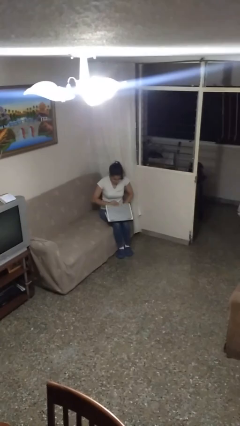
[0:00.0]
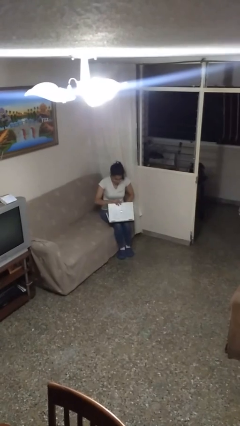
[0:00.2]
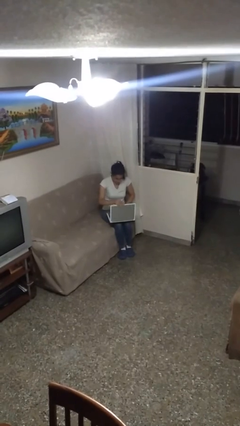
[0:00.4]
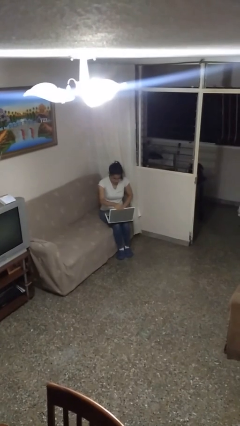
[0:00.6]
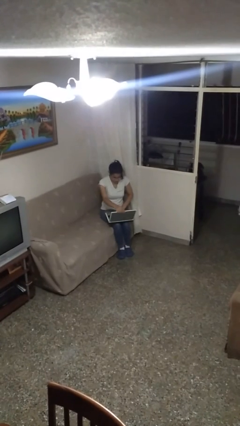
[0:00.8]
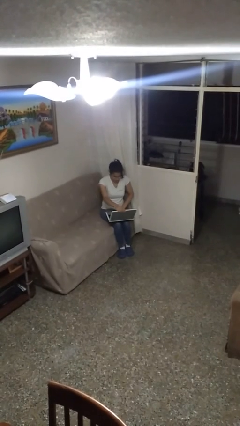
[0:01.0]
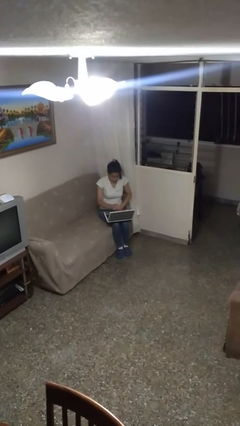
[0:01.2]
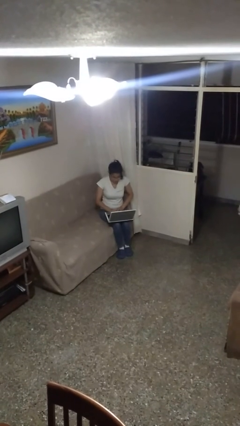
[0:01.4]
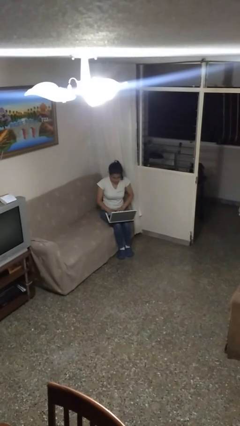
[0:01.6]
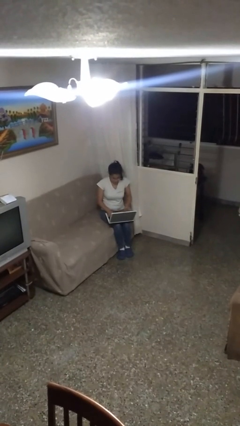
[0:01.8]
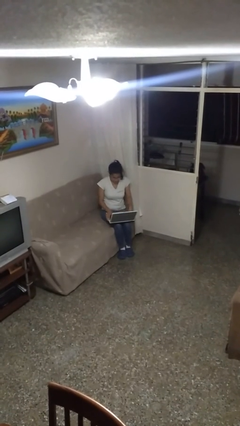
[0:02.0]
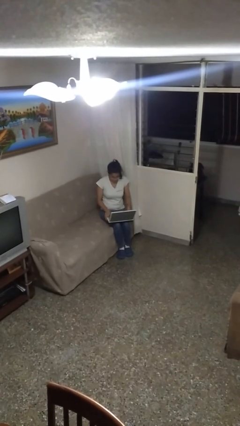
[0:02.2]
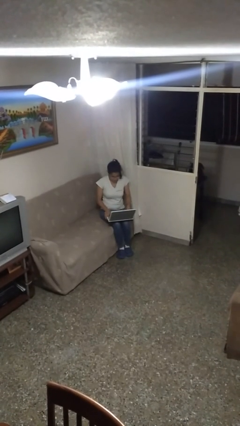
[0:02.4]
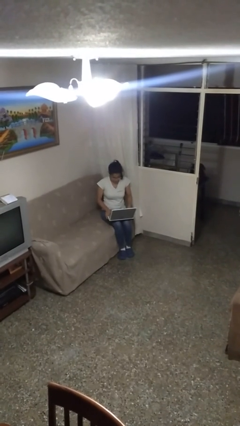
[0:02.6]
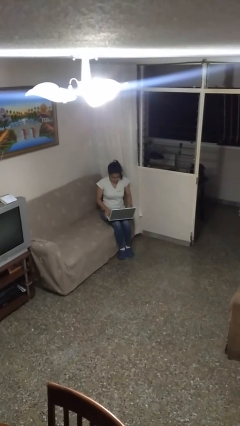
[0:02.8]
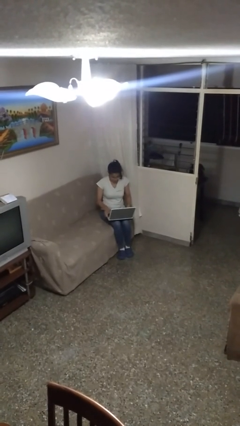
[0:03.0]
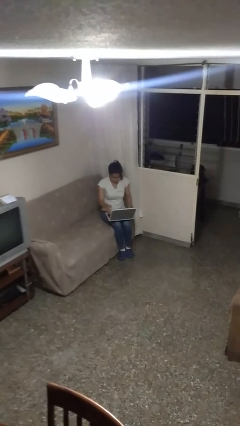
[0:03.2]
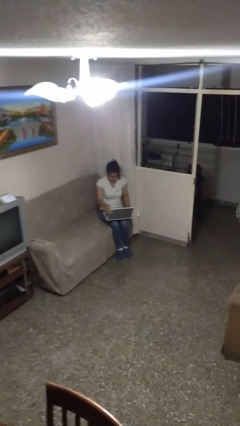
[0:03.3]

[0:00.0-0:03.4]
person opens laptop

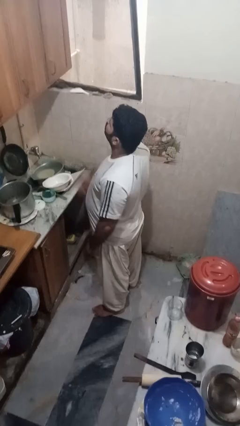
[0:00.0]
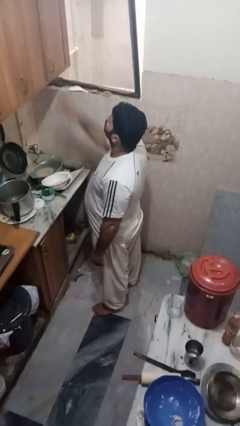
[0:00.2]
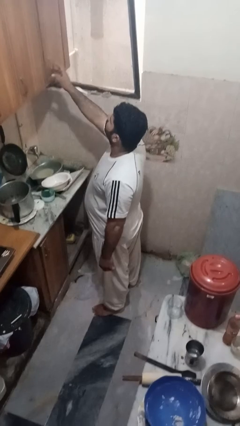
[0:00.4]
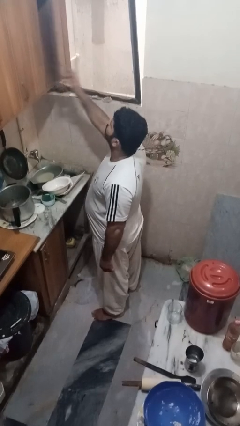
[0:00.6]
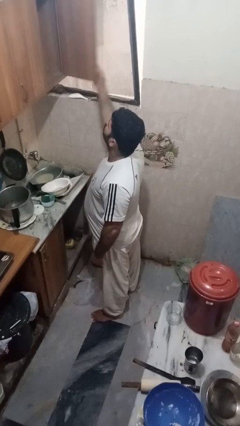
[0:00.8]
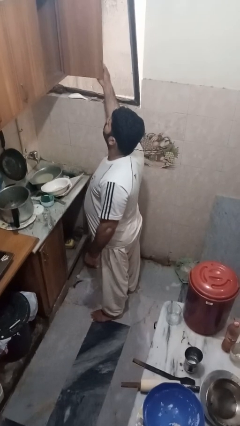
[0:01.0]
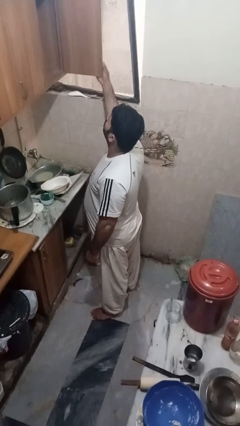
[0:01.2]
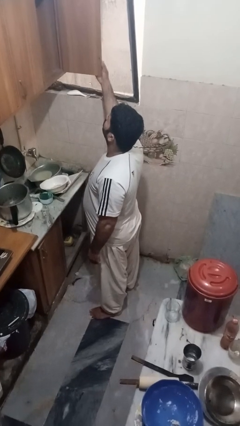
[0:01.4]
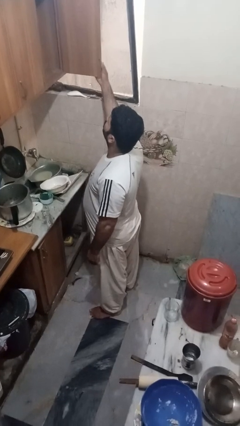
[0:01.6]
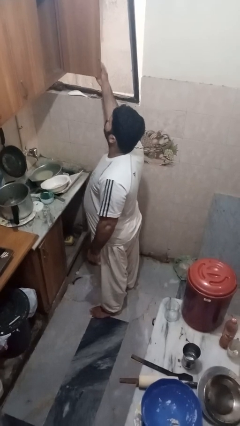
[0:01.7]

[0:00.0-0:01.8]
person opens cabinet

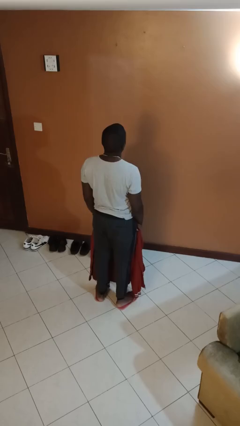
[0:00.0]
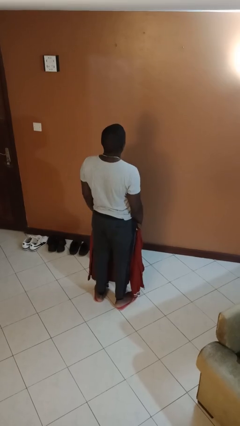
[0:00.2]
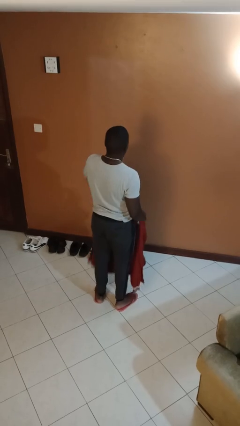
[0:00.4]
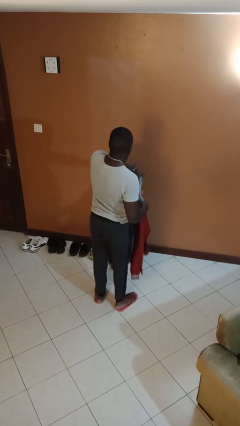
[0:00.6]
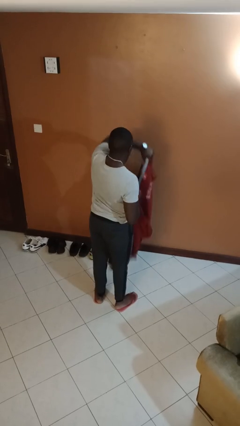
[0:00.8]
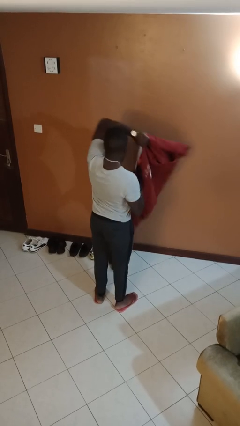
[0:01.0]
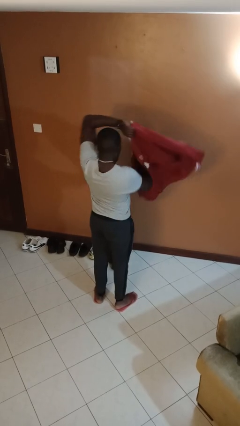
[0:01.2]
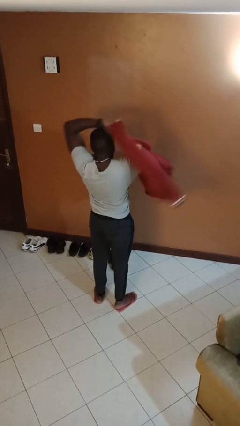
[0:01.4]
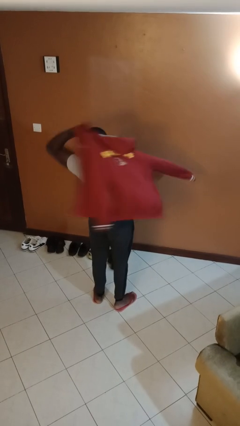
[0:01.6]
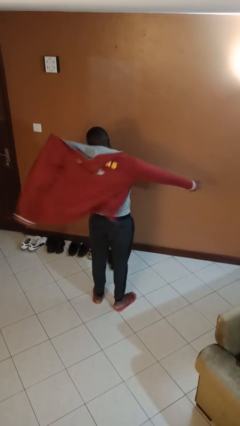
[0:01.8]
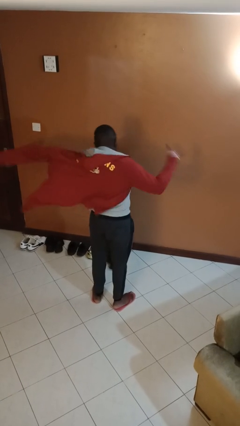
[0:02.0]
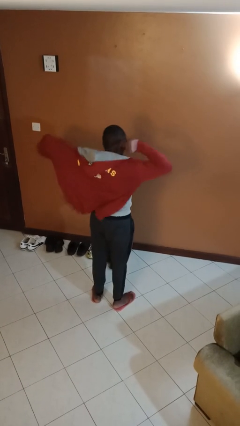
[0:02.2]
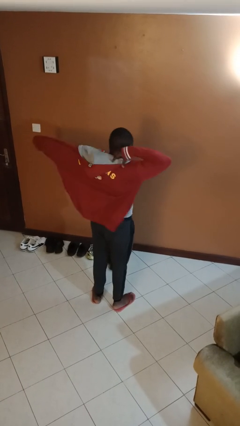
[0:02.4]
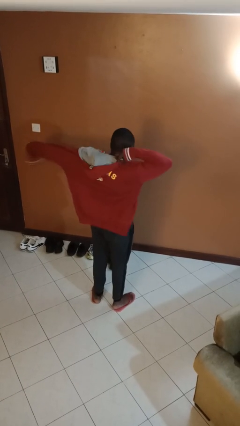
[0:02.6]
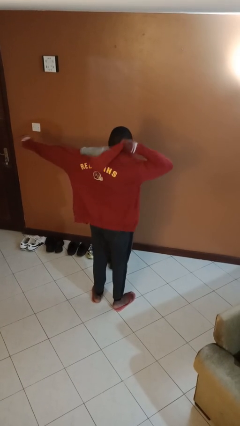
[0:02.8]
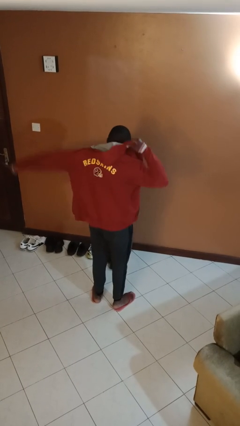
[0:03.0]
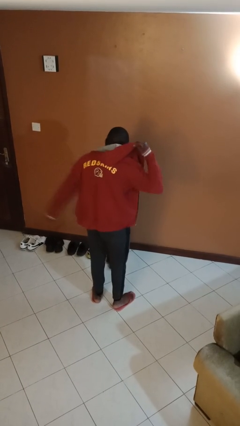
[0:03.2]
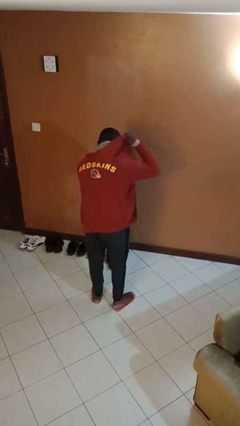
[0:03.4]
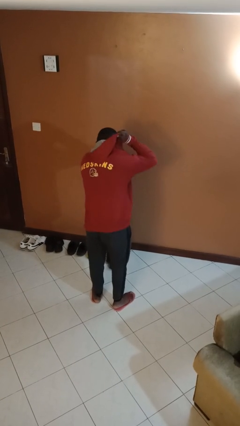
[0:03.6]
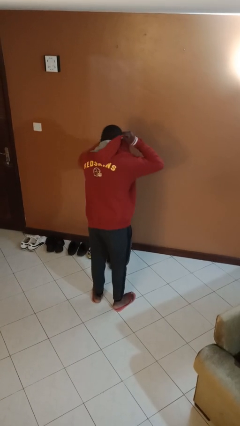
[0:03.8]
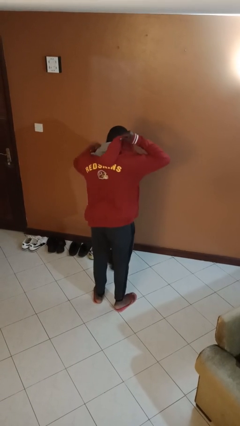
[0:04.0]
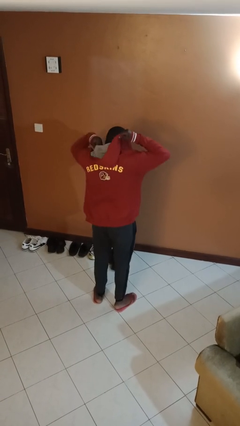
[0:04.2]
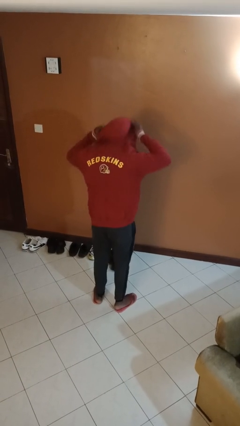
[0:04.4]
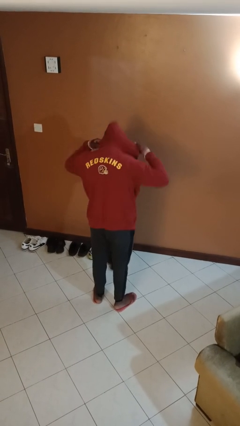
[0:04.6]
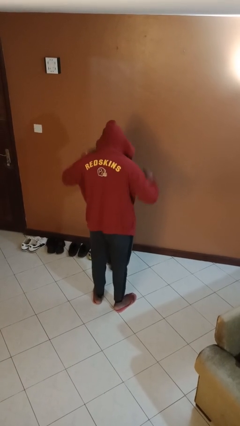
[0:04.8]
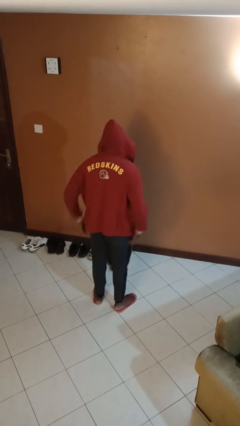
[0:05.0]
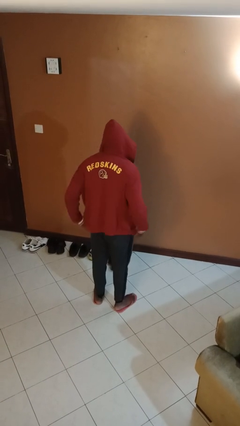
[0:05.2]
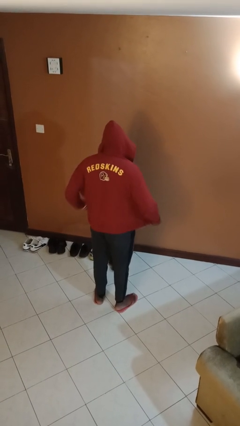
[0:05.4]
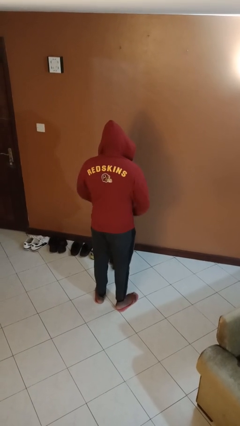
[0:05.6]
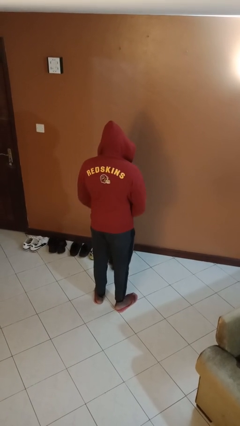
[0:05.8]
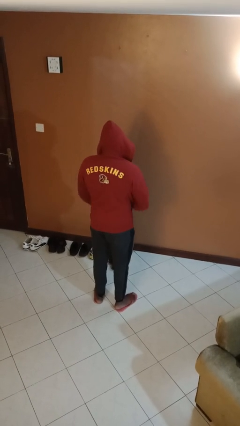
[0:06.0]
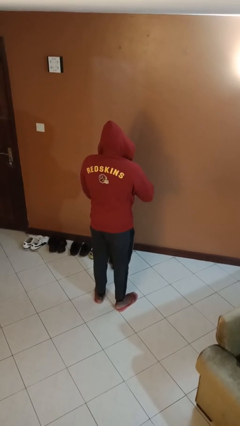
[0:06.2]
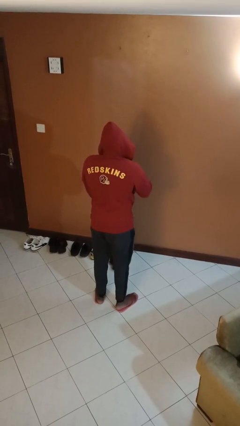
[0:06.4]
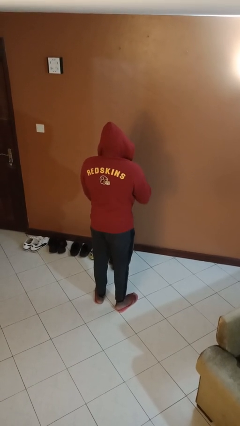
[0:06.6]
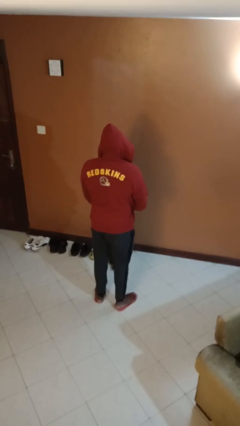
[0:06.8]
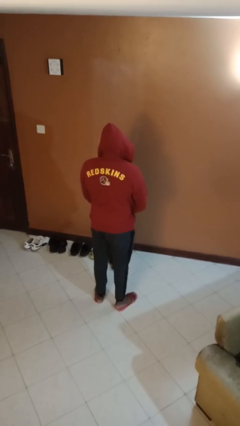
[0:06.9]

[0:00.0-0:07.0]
person puts on hoodie

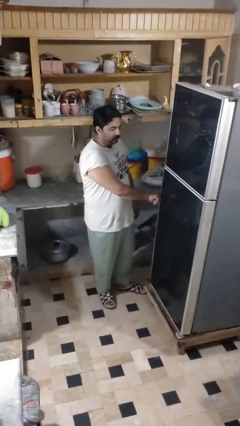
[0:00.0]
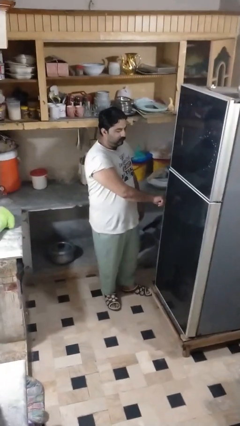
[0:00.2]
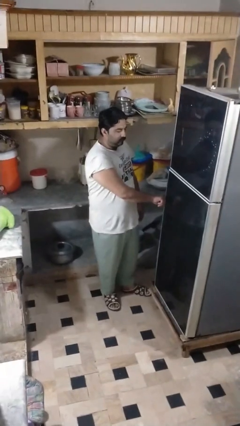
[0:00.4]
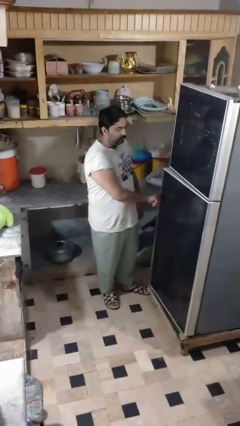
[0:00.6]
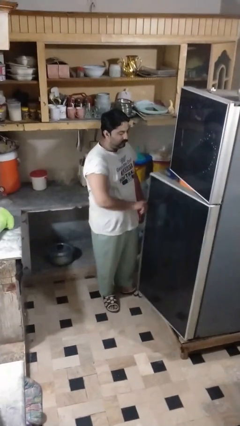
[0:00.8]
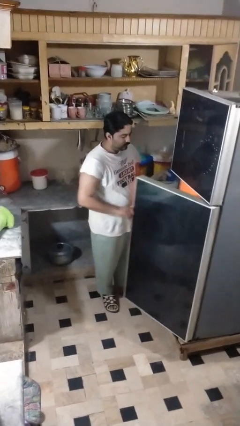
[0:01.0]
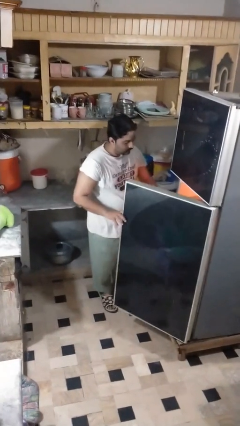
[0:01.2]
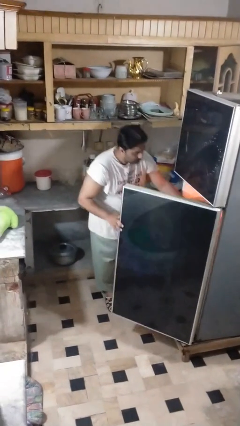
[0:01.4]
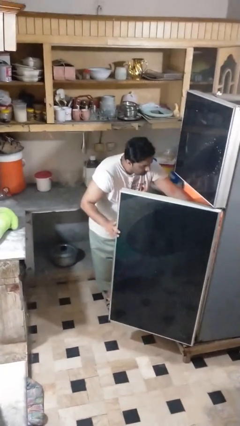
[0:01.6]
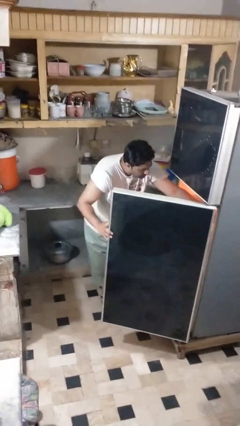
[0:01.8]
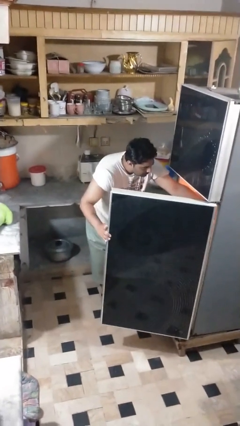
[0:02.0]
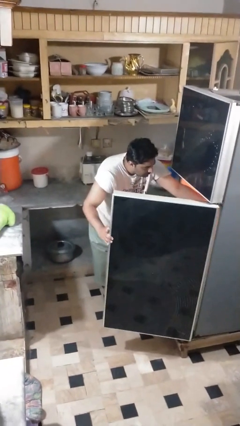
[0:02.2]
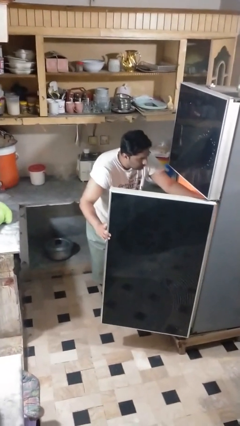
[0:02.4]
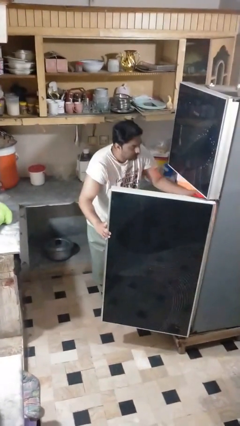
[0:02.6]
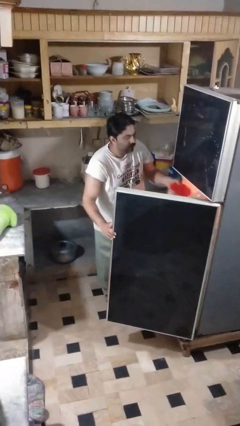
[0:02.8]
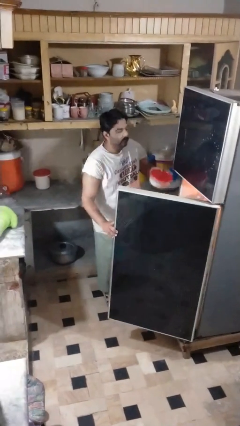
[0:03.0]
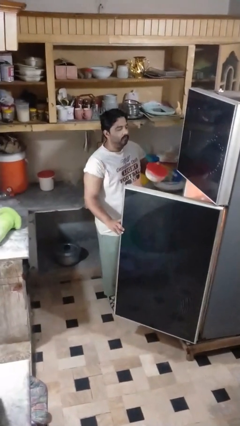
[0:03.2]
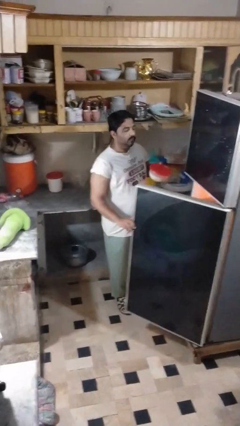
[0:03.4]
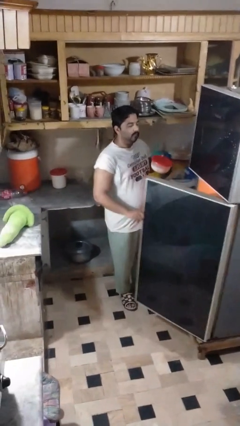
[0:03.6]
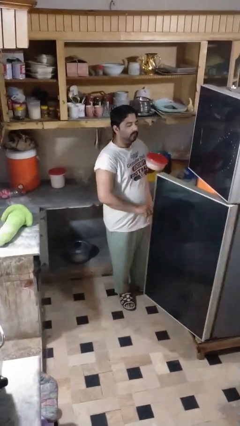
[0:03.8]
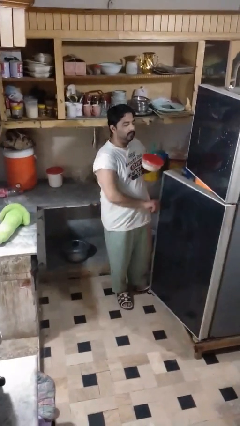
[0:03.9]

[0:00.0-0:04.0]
person takes object from refrigerator

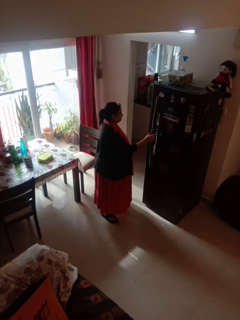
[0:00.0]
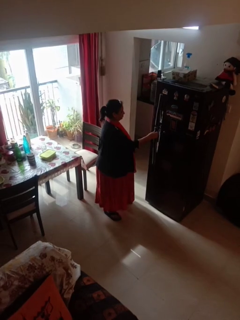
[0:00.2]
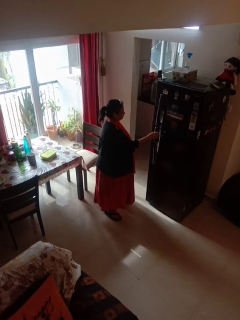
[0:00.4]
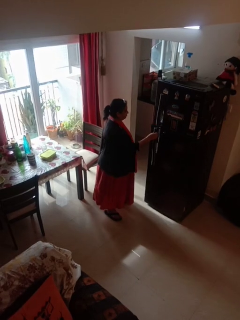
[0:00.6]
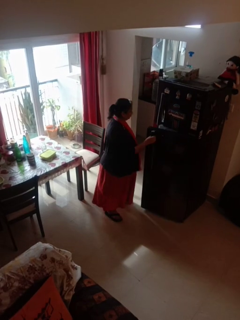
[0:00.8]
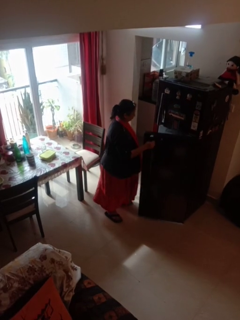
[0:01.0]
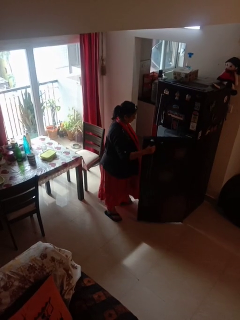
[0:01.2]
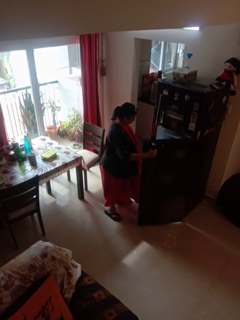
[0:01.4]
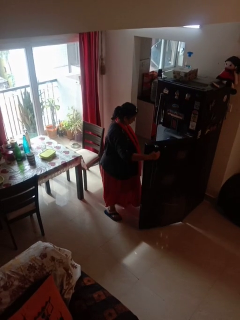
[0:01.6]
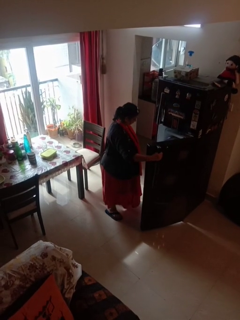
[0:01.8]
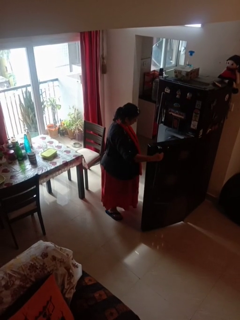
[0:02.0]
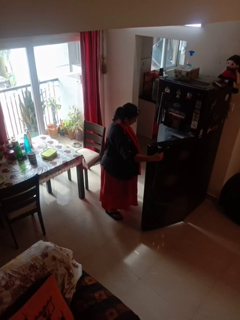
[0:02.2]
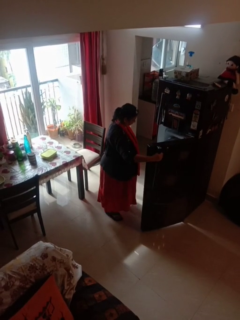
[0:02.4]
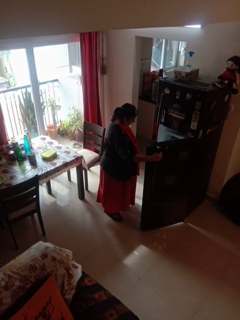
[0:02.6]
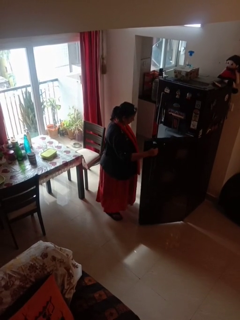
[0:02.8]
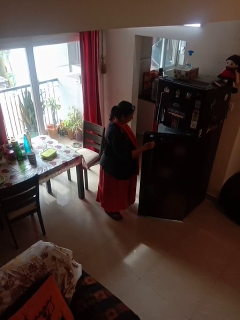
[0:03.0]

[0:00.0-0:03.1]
person opens refrigerator
